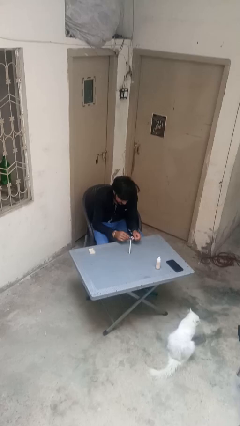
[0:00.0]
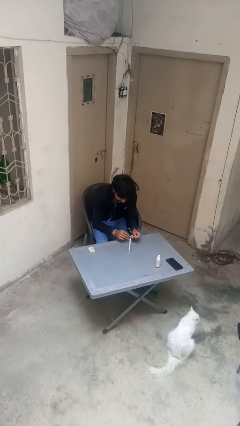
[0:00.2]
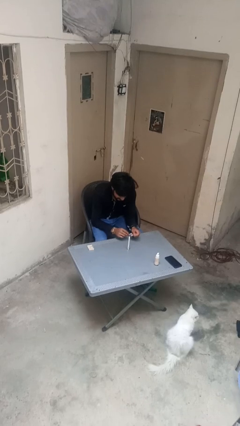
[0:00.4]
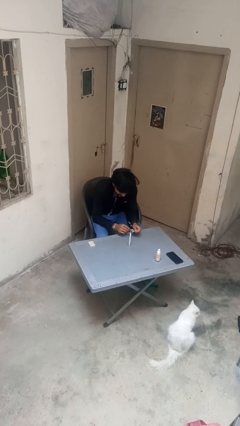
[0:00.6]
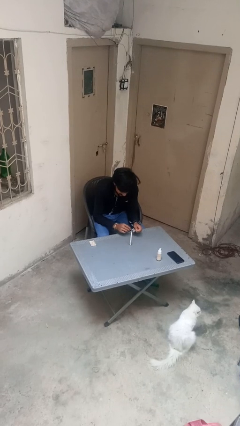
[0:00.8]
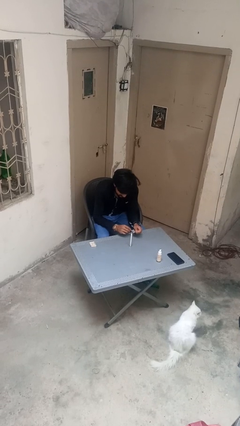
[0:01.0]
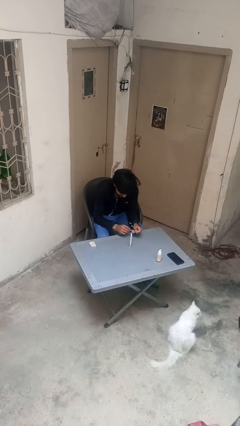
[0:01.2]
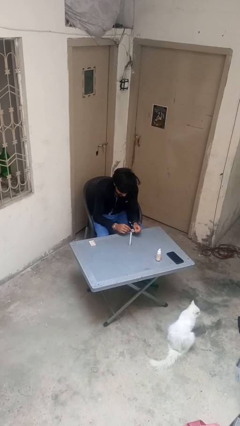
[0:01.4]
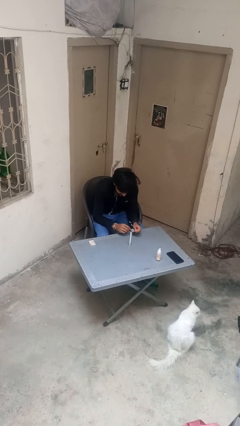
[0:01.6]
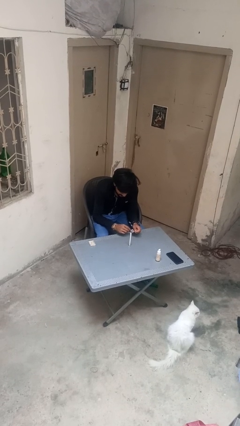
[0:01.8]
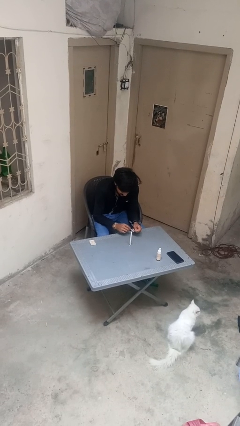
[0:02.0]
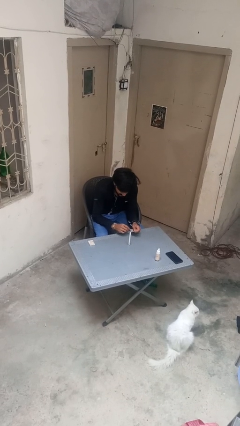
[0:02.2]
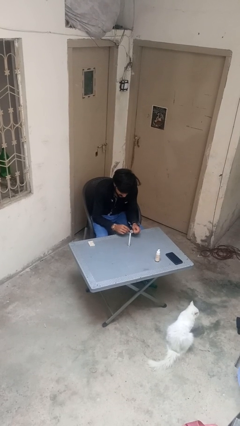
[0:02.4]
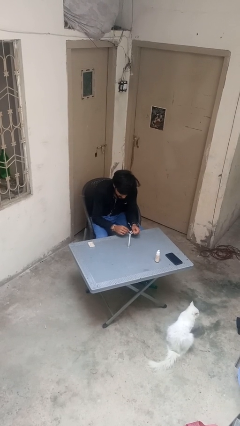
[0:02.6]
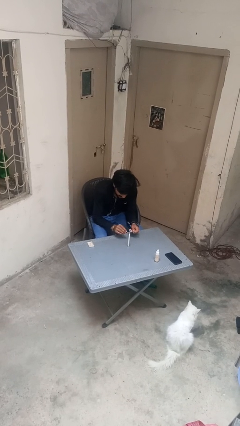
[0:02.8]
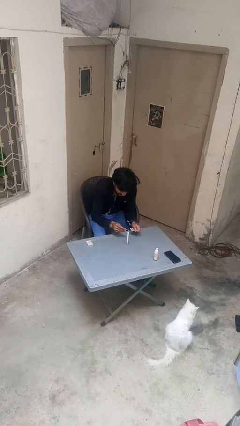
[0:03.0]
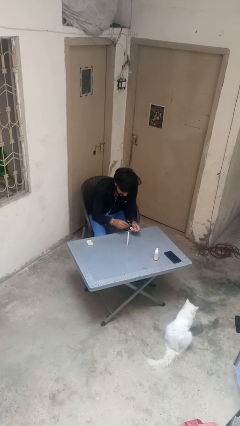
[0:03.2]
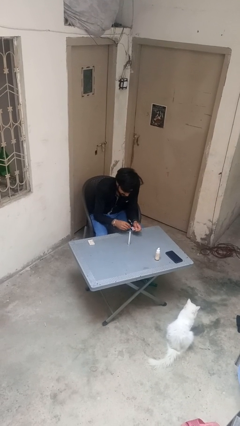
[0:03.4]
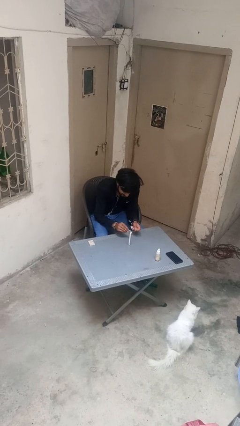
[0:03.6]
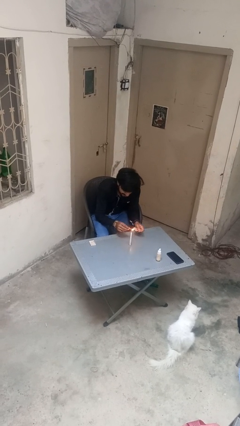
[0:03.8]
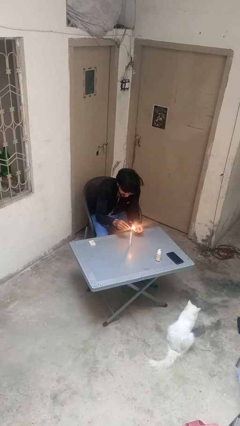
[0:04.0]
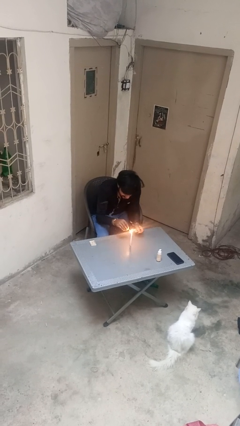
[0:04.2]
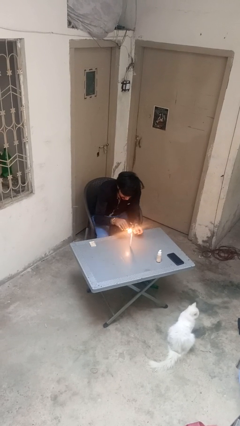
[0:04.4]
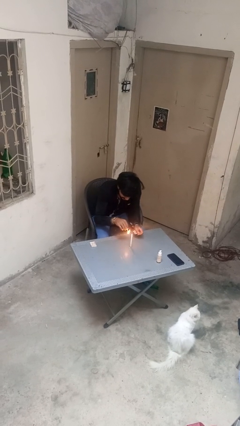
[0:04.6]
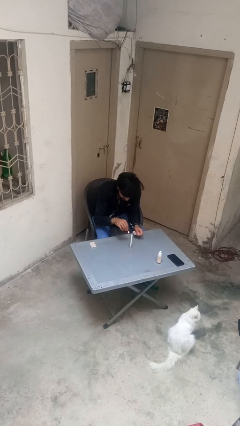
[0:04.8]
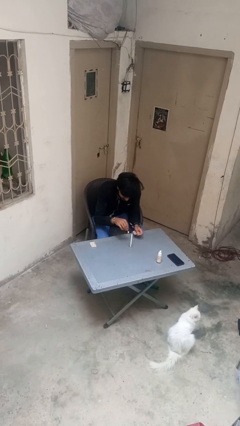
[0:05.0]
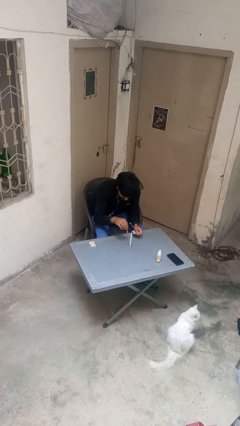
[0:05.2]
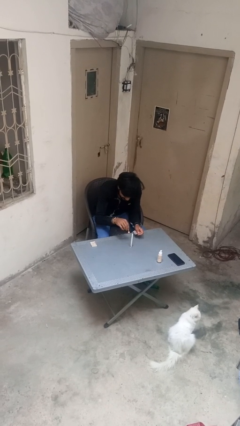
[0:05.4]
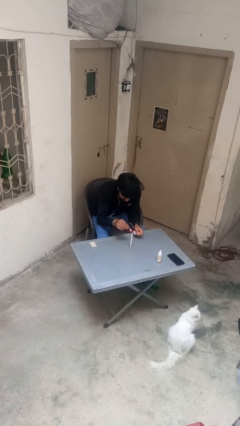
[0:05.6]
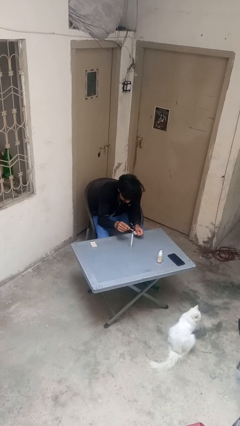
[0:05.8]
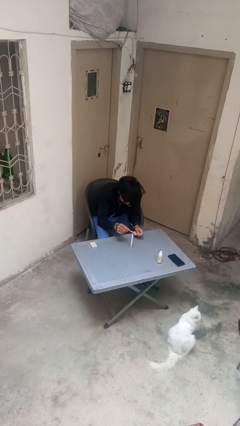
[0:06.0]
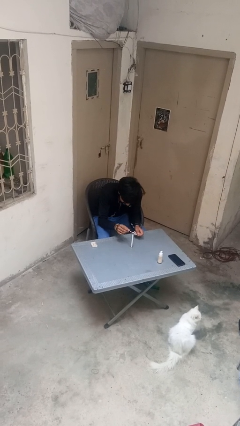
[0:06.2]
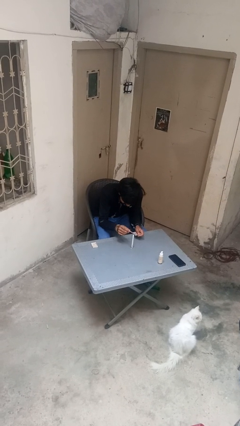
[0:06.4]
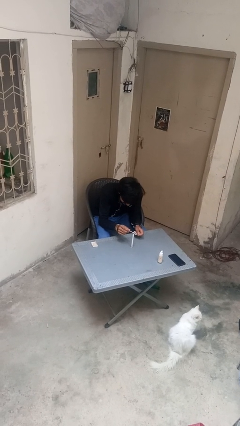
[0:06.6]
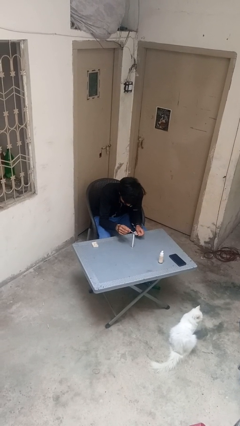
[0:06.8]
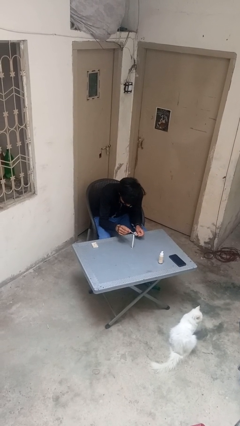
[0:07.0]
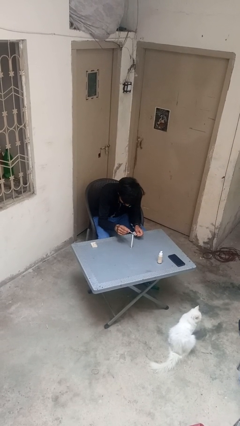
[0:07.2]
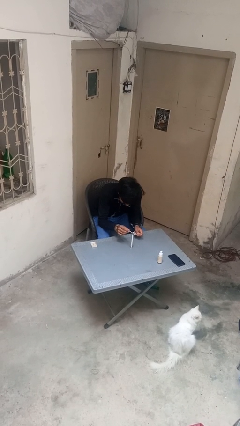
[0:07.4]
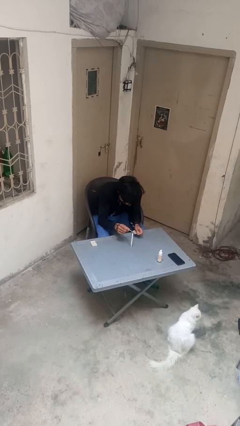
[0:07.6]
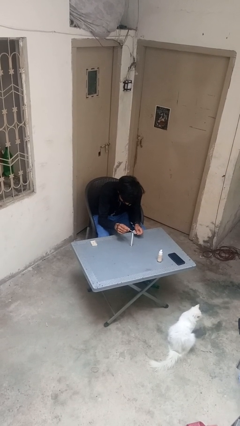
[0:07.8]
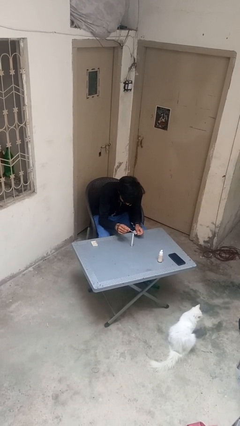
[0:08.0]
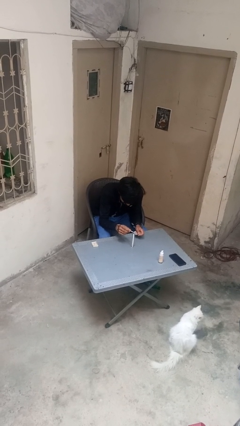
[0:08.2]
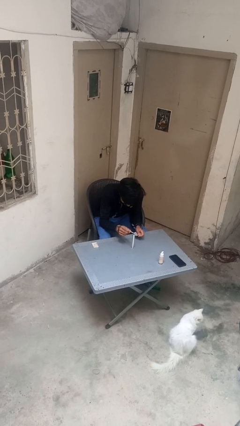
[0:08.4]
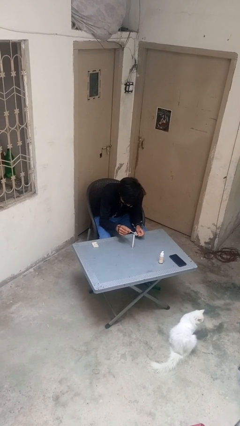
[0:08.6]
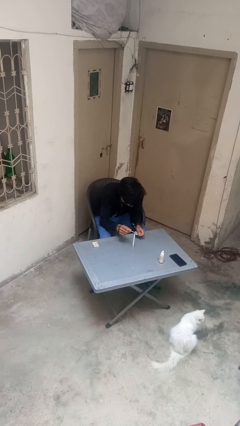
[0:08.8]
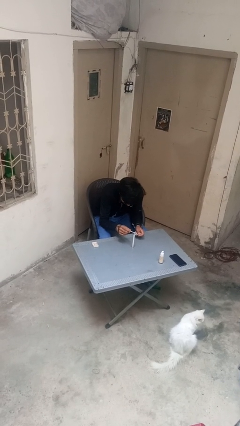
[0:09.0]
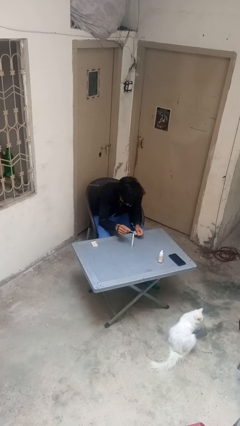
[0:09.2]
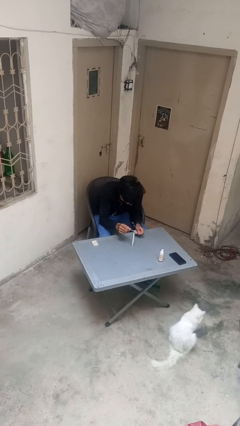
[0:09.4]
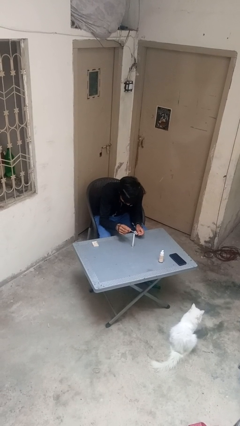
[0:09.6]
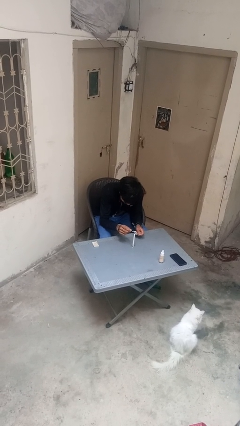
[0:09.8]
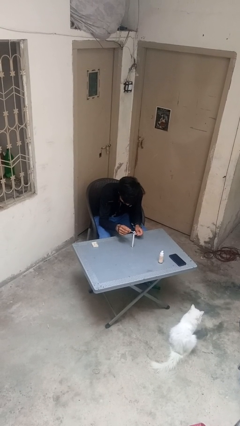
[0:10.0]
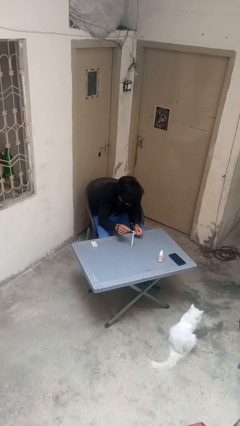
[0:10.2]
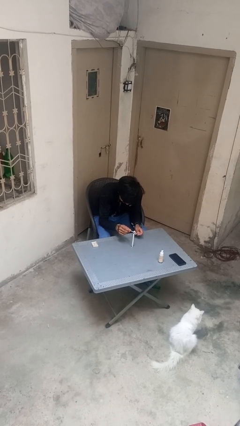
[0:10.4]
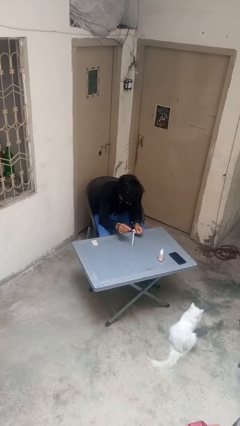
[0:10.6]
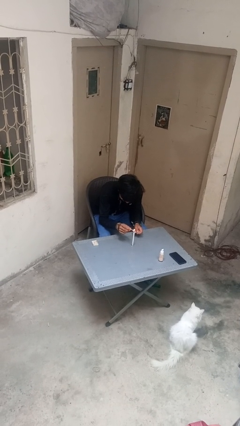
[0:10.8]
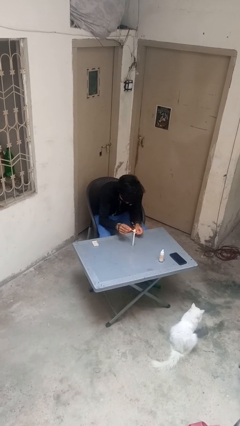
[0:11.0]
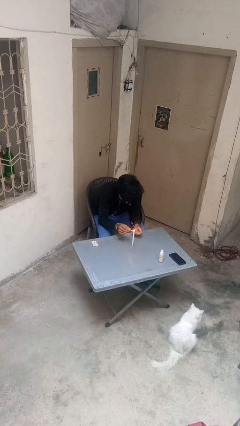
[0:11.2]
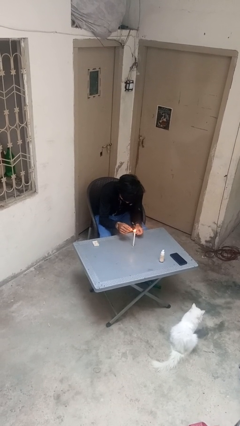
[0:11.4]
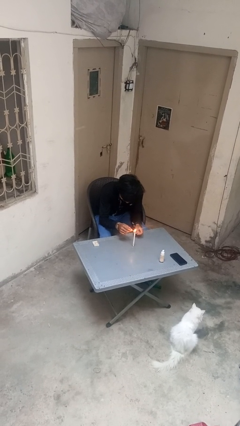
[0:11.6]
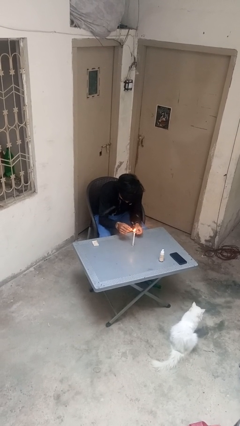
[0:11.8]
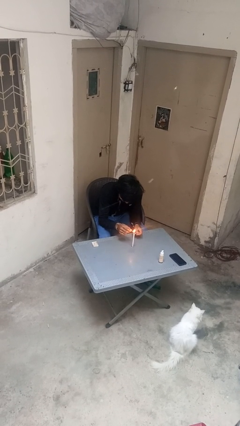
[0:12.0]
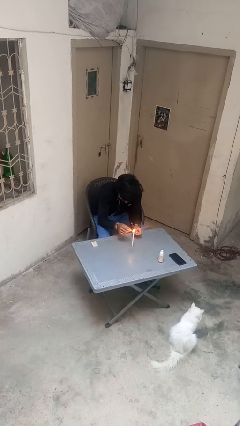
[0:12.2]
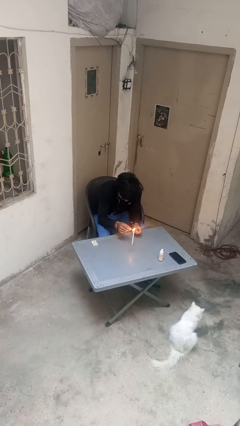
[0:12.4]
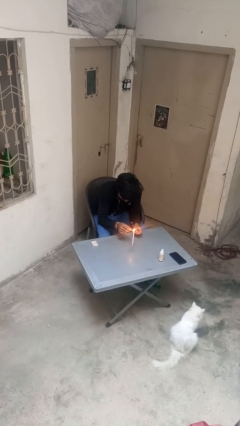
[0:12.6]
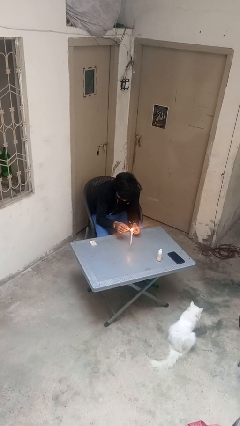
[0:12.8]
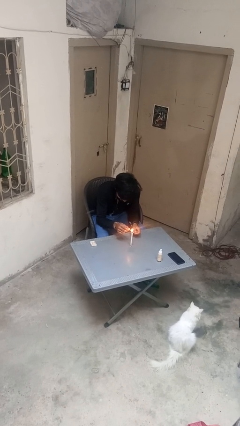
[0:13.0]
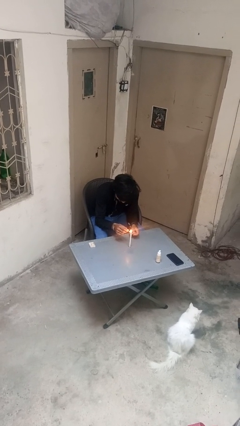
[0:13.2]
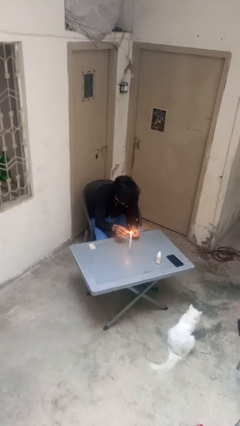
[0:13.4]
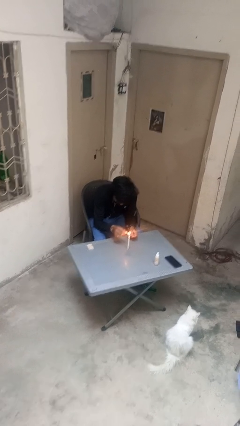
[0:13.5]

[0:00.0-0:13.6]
person lights candle

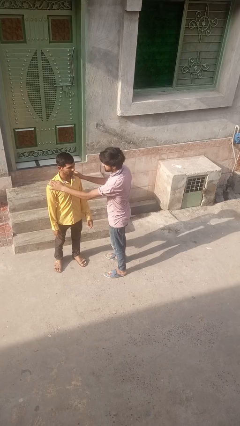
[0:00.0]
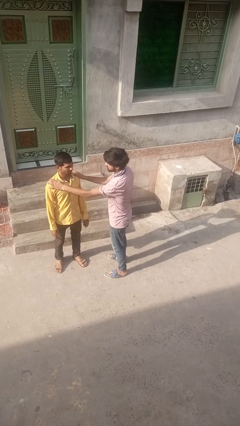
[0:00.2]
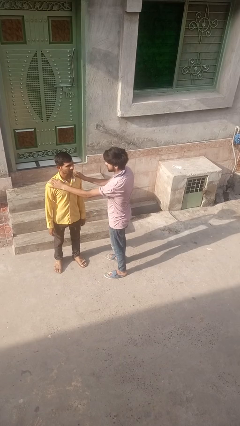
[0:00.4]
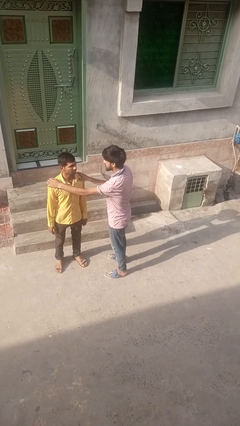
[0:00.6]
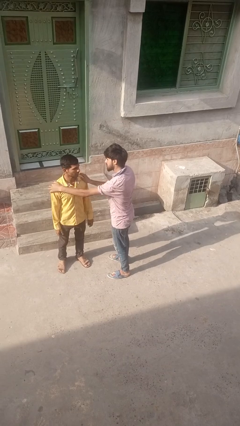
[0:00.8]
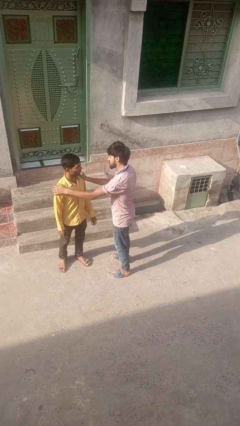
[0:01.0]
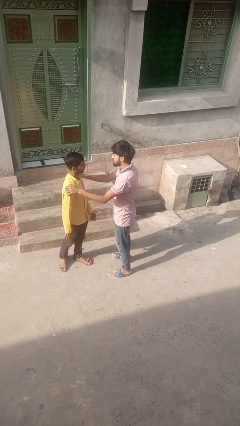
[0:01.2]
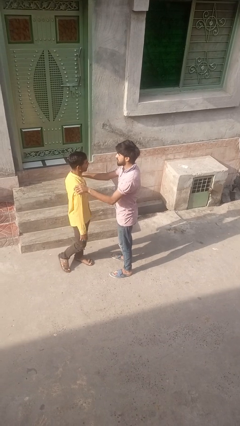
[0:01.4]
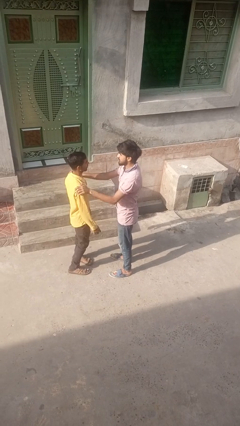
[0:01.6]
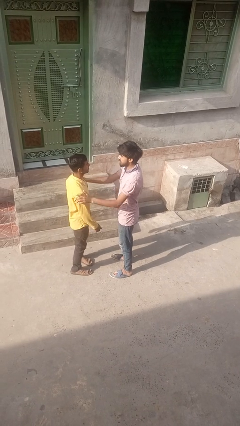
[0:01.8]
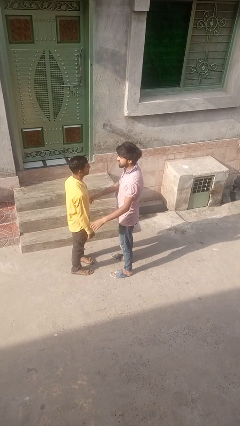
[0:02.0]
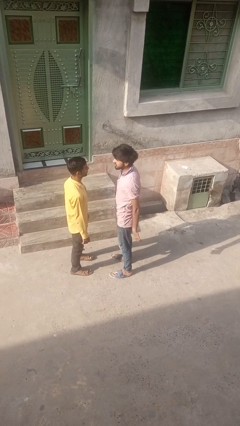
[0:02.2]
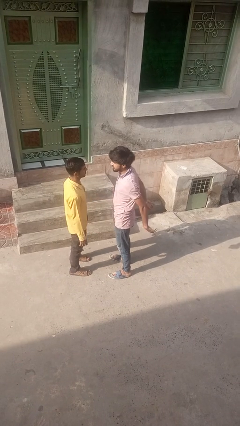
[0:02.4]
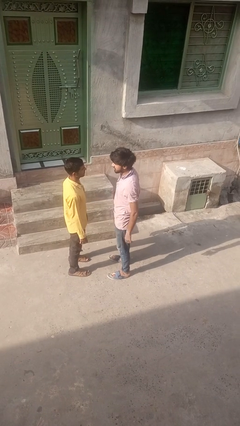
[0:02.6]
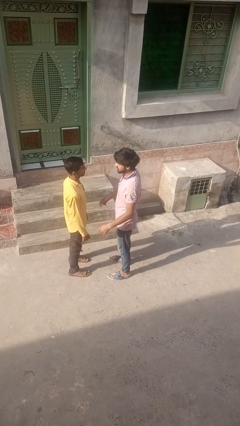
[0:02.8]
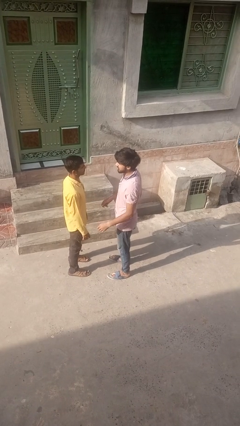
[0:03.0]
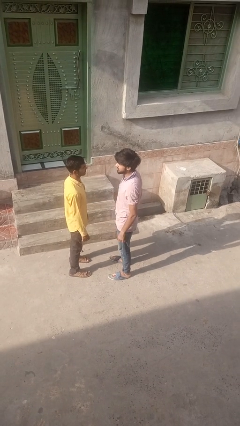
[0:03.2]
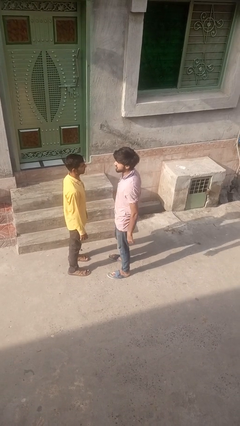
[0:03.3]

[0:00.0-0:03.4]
person spins person around

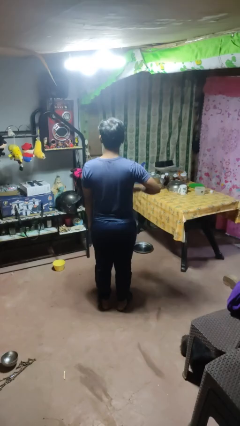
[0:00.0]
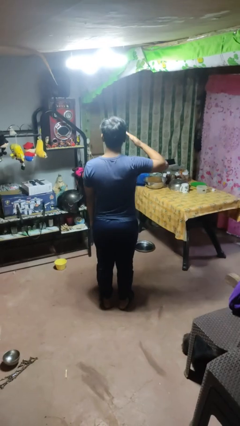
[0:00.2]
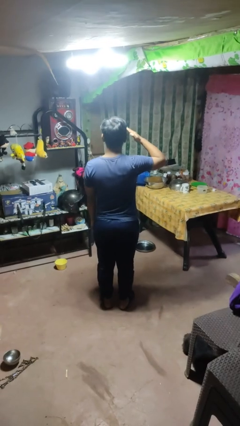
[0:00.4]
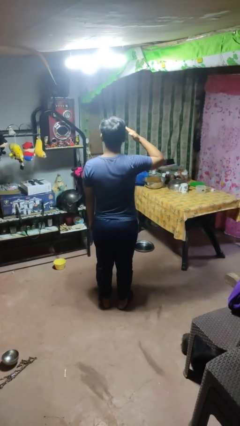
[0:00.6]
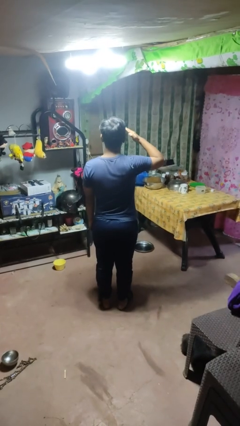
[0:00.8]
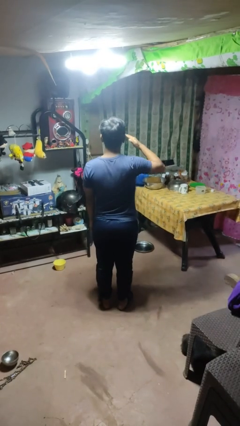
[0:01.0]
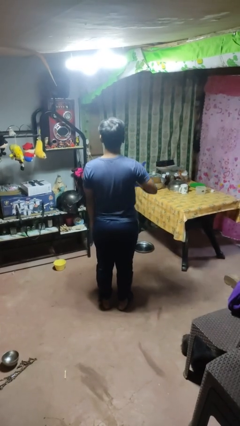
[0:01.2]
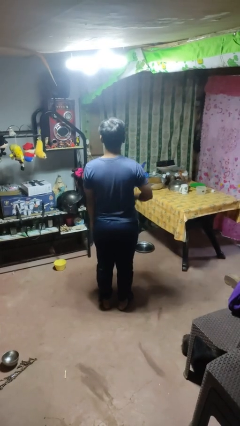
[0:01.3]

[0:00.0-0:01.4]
person salutes
